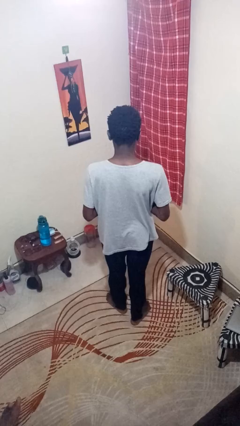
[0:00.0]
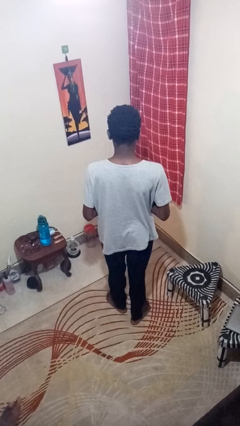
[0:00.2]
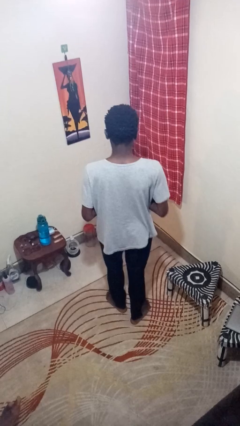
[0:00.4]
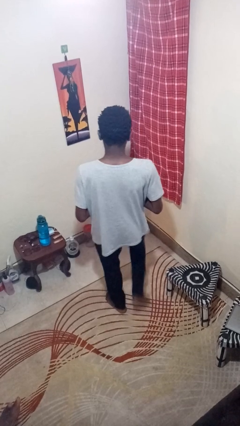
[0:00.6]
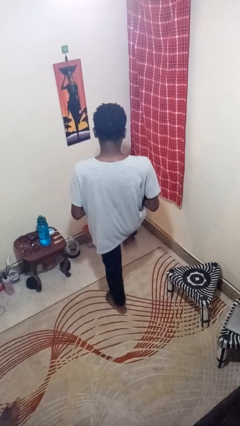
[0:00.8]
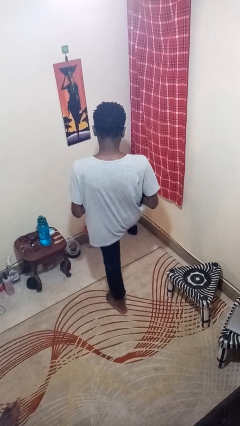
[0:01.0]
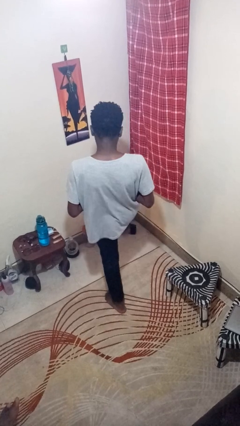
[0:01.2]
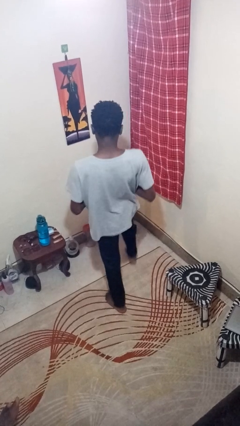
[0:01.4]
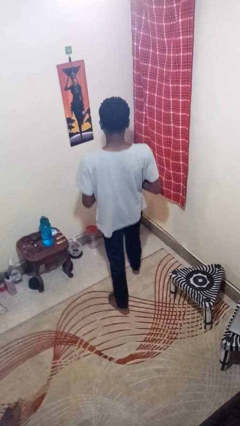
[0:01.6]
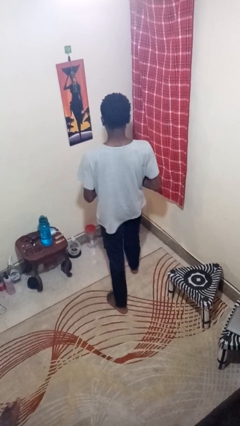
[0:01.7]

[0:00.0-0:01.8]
person karate kicks

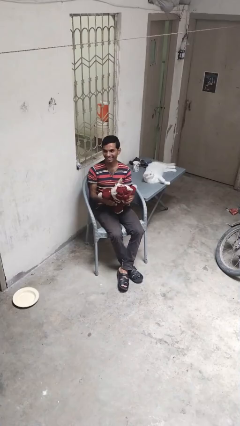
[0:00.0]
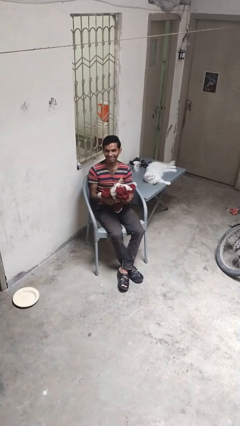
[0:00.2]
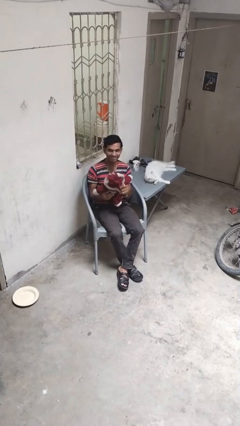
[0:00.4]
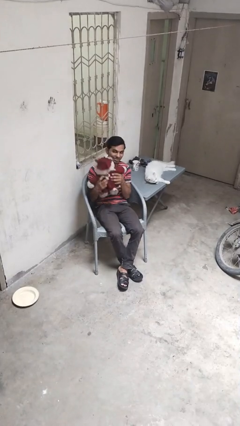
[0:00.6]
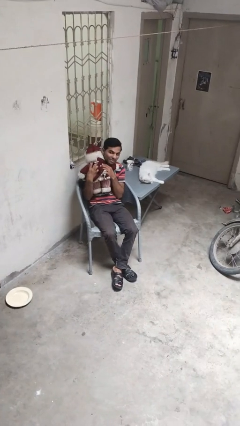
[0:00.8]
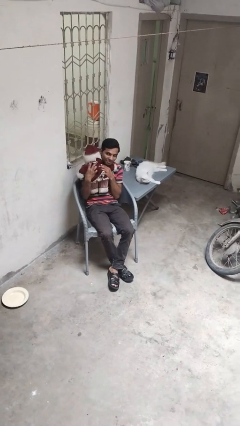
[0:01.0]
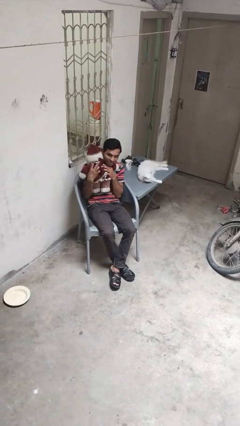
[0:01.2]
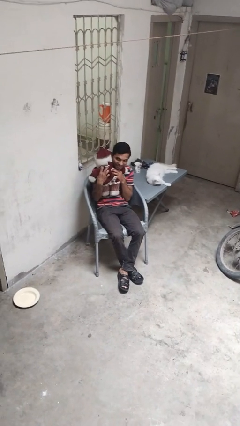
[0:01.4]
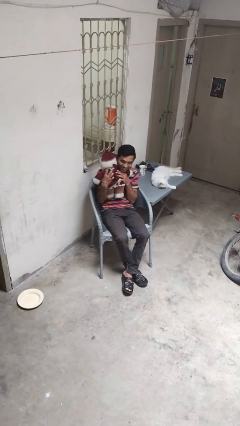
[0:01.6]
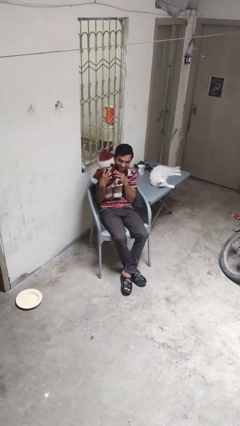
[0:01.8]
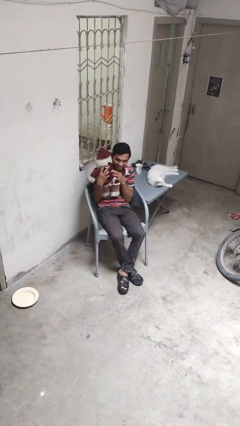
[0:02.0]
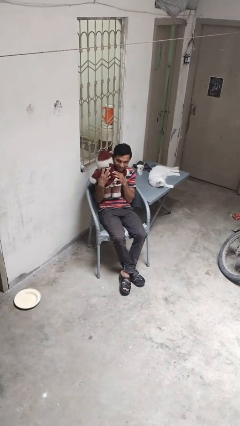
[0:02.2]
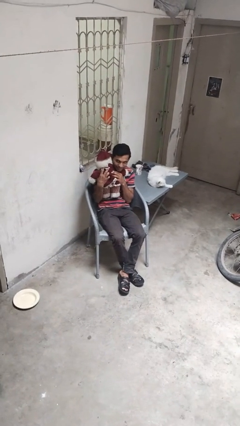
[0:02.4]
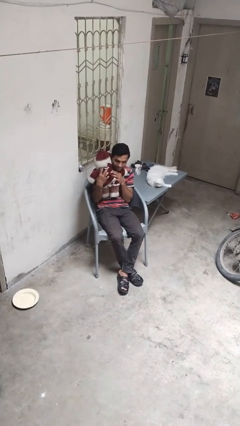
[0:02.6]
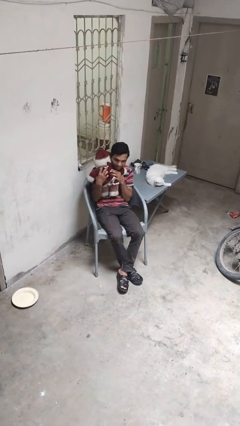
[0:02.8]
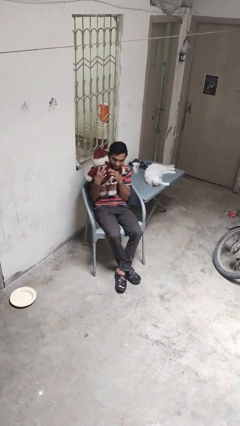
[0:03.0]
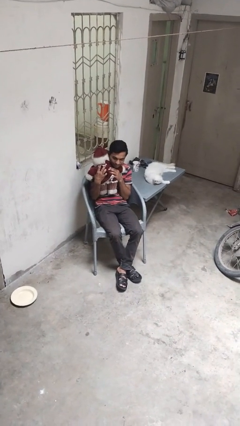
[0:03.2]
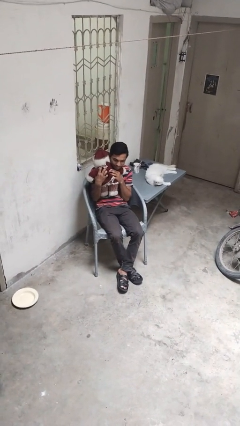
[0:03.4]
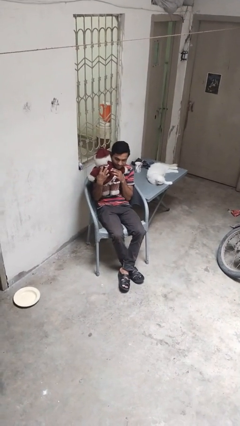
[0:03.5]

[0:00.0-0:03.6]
person hugs stuffed animal

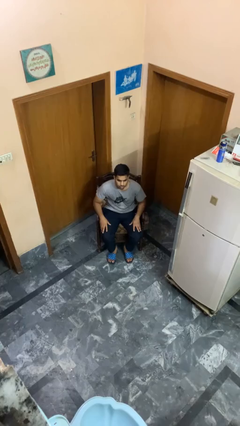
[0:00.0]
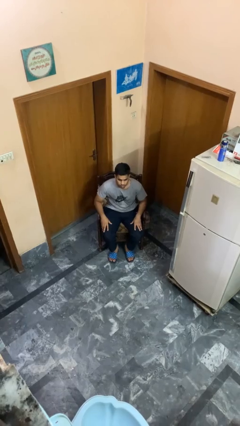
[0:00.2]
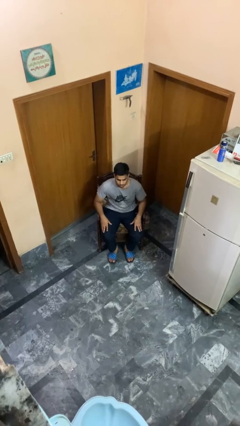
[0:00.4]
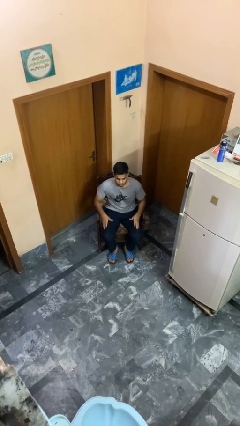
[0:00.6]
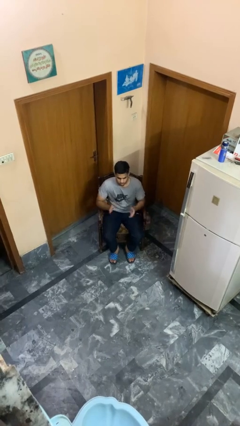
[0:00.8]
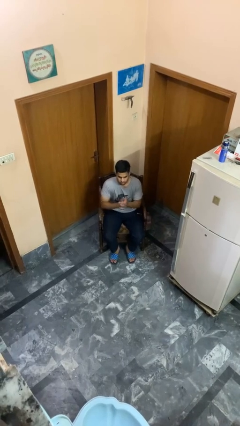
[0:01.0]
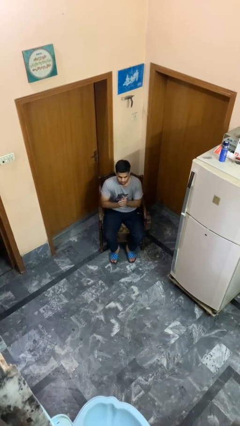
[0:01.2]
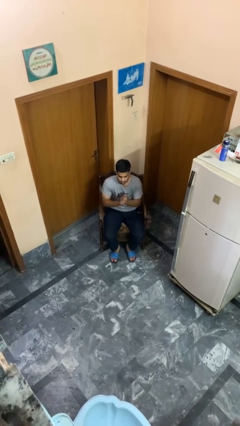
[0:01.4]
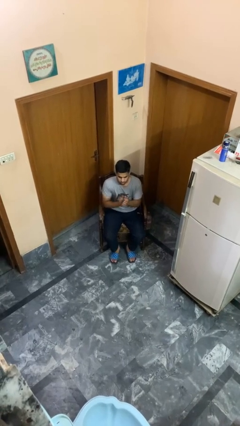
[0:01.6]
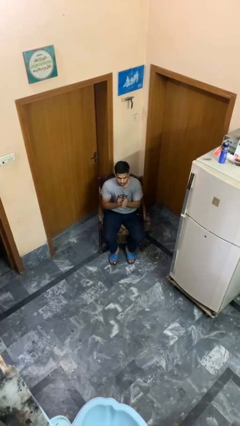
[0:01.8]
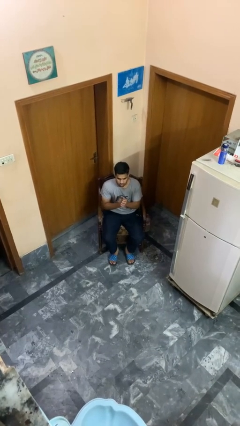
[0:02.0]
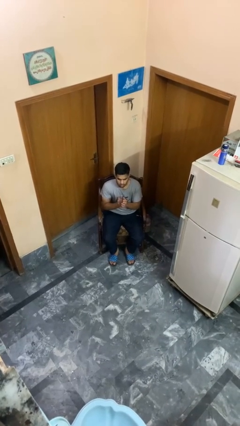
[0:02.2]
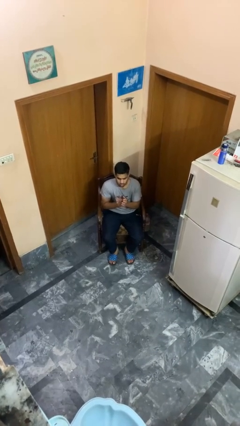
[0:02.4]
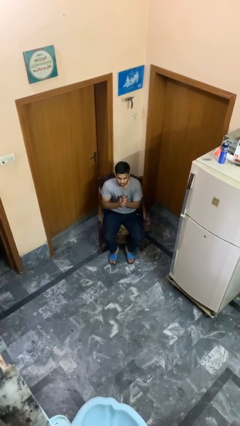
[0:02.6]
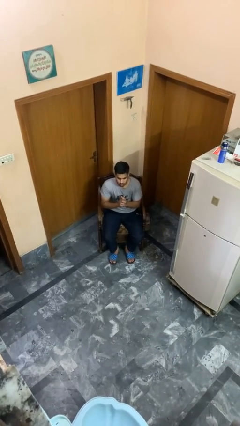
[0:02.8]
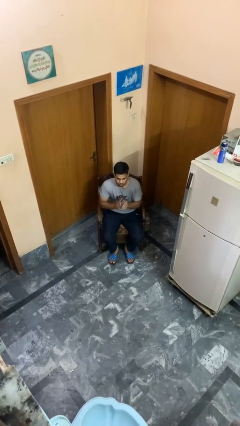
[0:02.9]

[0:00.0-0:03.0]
person claps hands

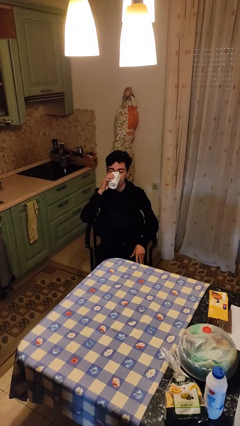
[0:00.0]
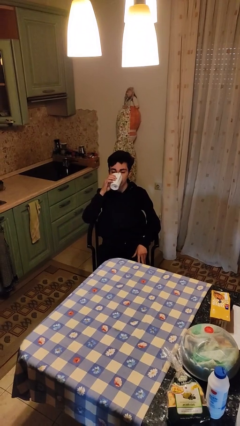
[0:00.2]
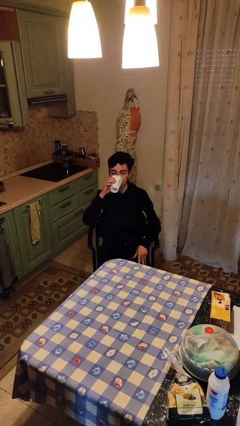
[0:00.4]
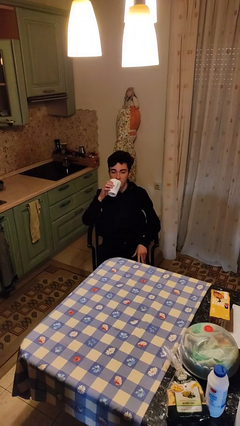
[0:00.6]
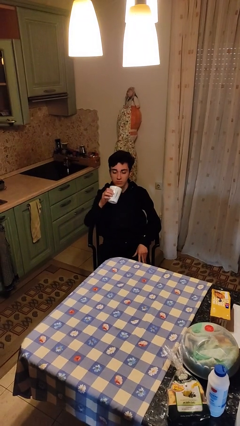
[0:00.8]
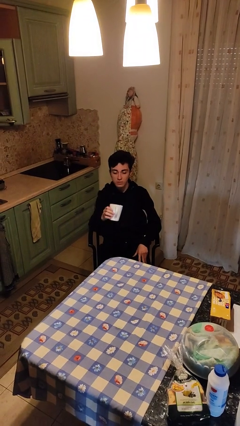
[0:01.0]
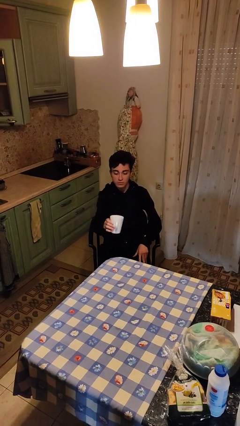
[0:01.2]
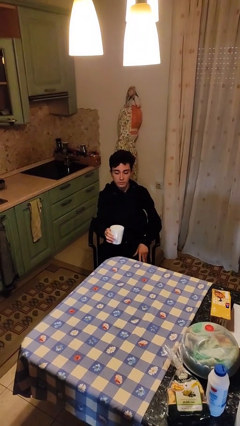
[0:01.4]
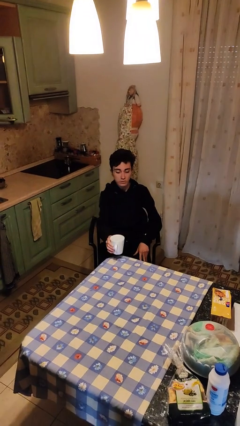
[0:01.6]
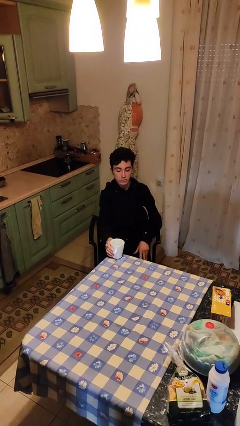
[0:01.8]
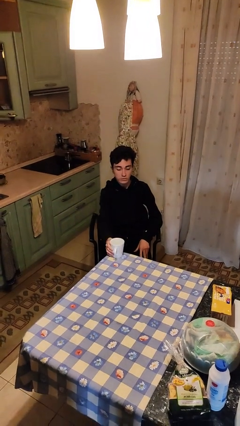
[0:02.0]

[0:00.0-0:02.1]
person puts down object on table

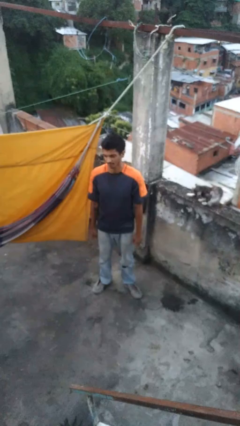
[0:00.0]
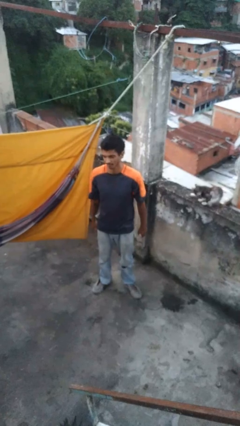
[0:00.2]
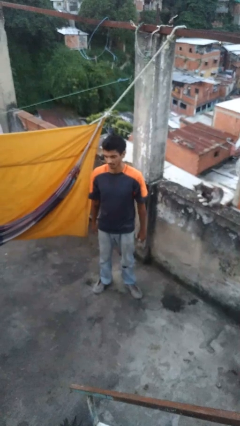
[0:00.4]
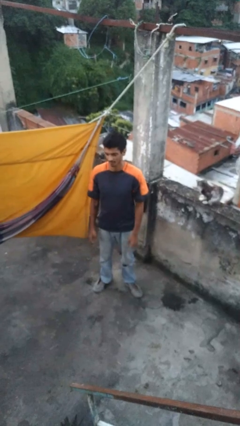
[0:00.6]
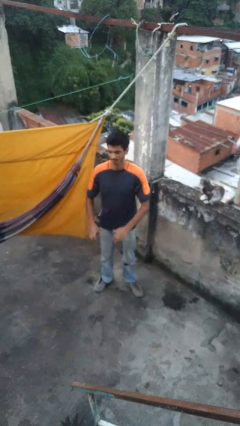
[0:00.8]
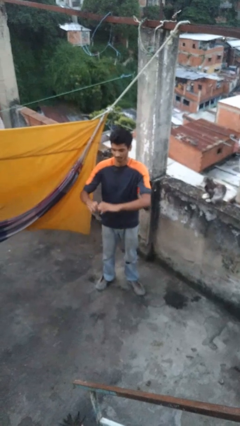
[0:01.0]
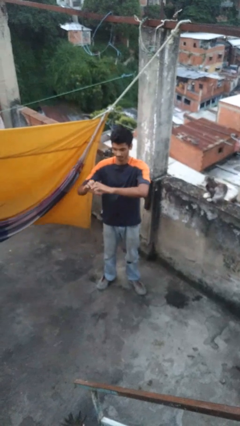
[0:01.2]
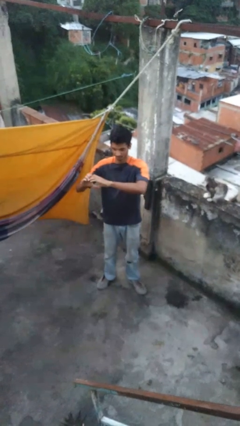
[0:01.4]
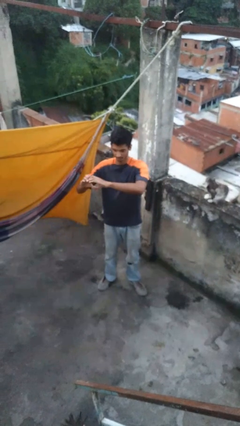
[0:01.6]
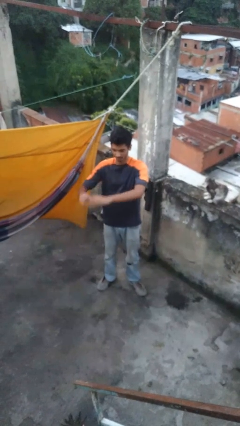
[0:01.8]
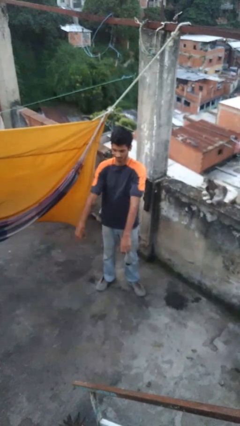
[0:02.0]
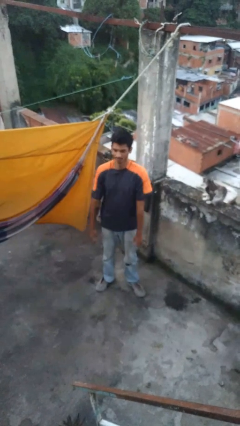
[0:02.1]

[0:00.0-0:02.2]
person gestures heart

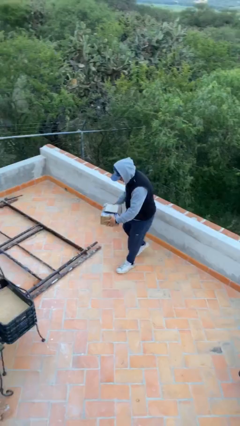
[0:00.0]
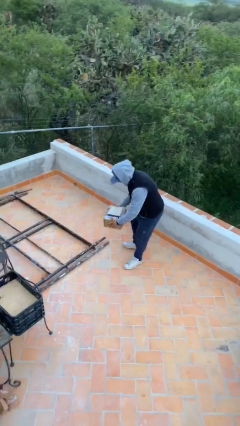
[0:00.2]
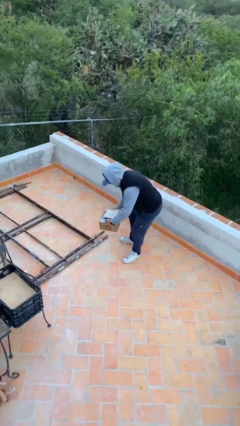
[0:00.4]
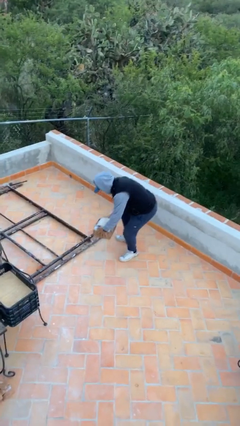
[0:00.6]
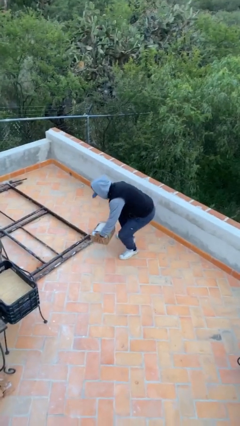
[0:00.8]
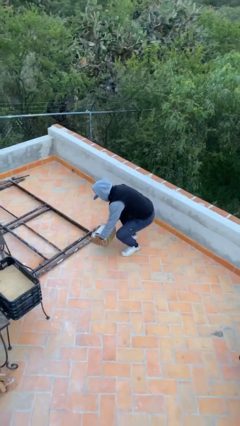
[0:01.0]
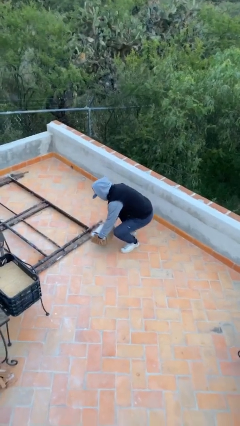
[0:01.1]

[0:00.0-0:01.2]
person puts down object on floor

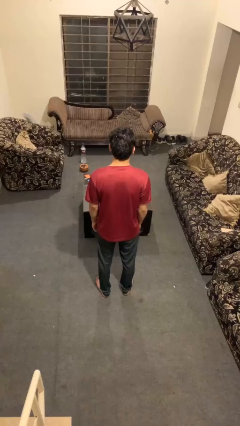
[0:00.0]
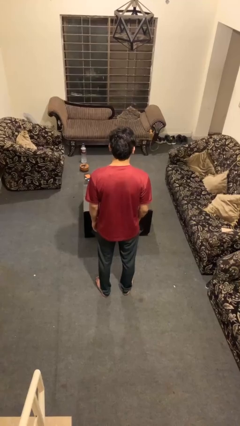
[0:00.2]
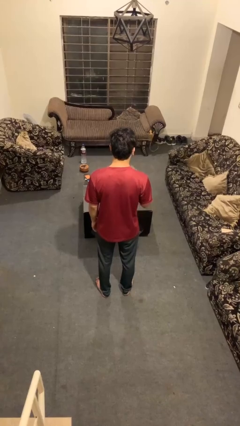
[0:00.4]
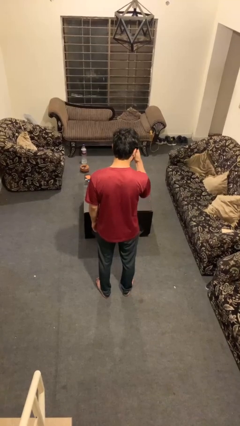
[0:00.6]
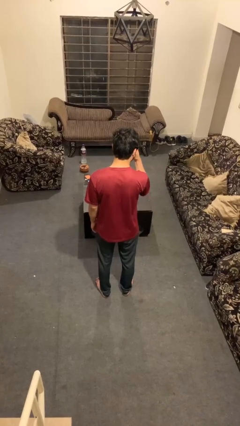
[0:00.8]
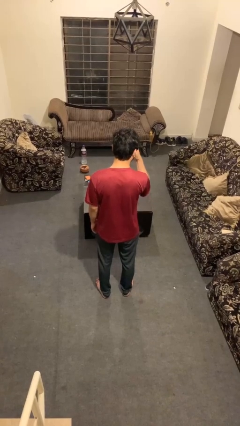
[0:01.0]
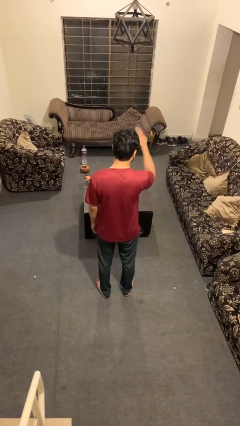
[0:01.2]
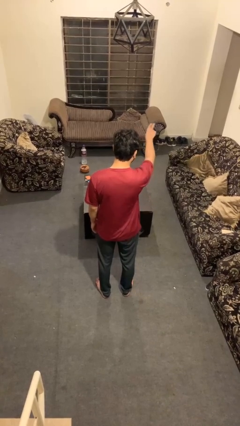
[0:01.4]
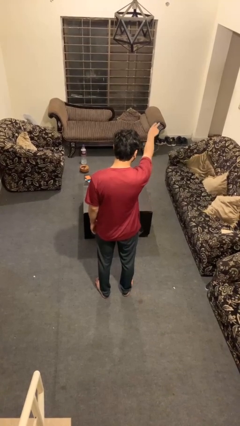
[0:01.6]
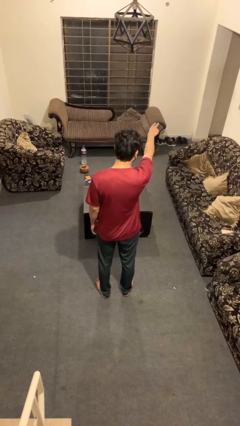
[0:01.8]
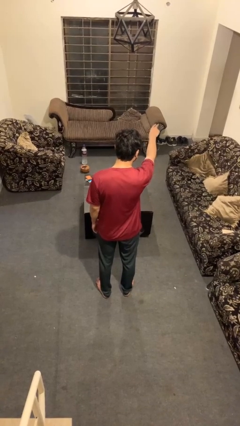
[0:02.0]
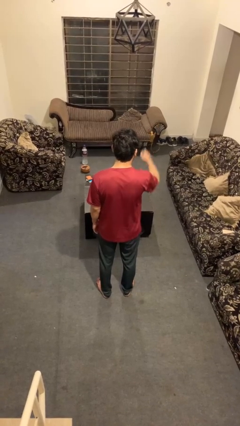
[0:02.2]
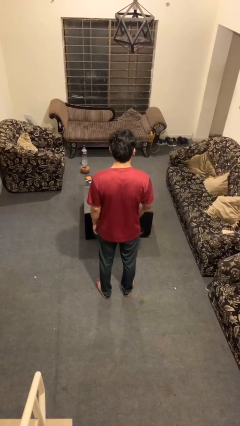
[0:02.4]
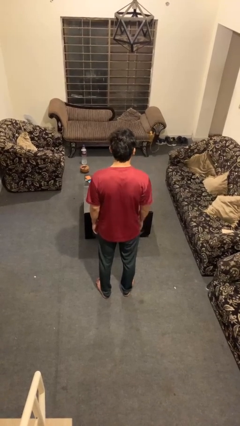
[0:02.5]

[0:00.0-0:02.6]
person gestures watch closely

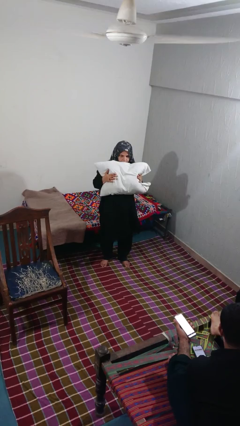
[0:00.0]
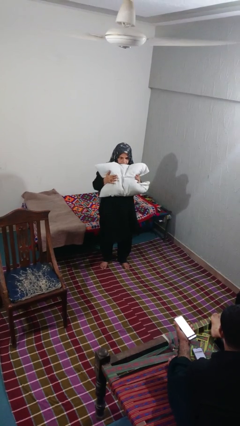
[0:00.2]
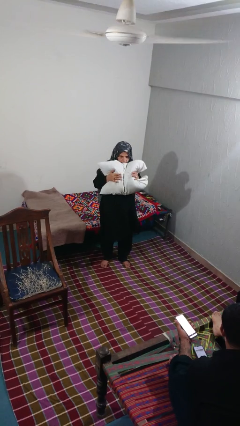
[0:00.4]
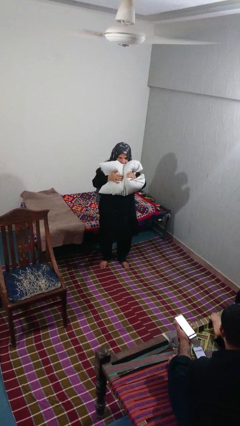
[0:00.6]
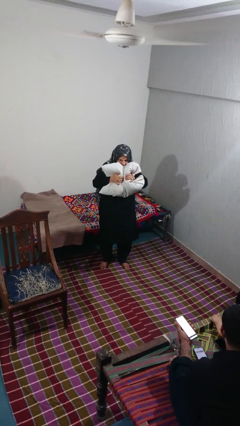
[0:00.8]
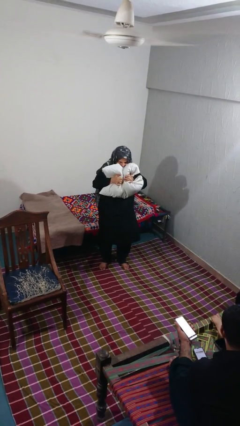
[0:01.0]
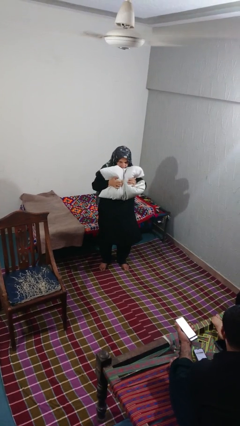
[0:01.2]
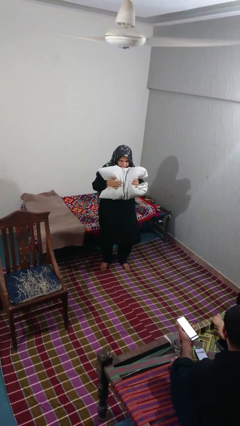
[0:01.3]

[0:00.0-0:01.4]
person squeezes object
